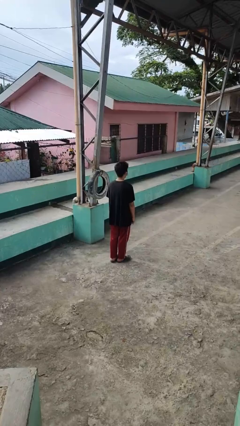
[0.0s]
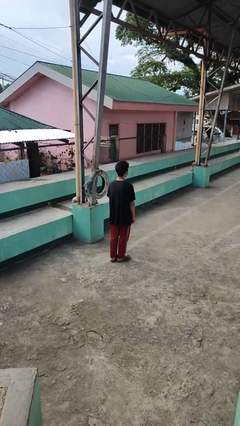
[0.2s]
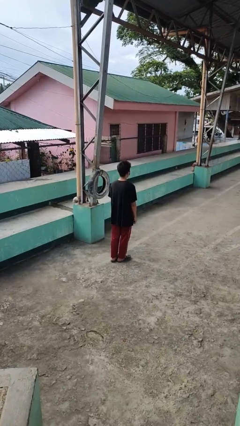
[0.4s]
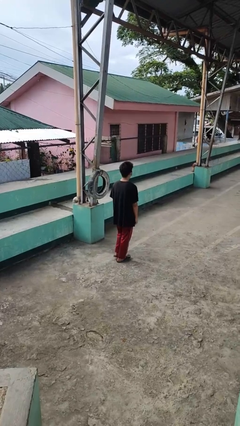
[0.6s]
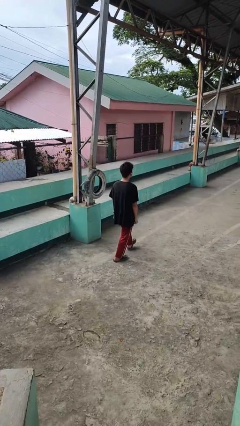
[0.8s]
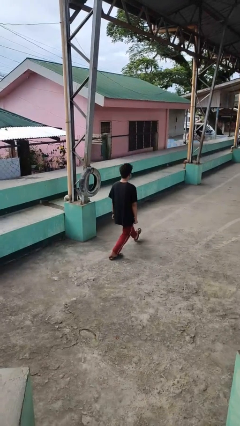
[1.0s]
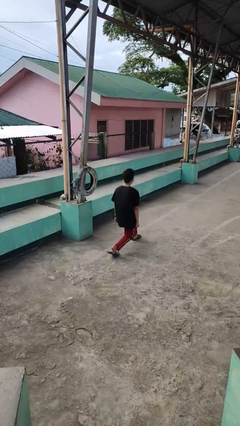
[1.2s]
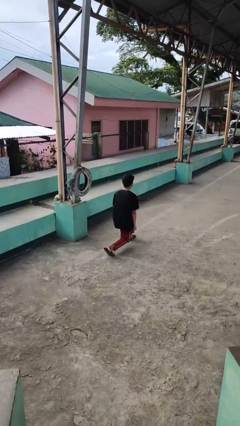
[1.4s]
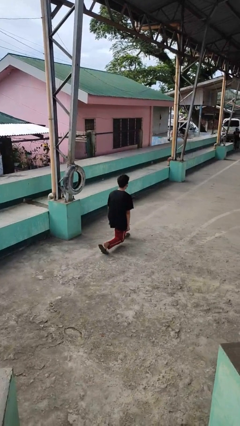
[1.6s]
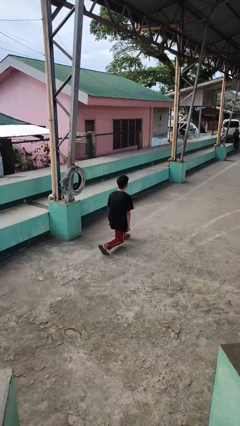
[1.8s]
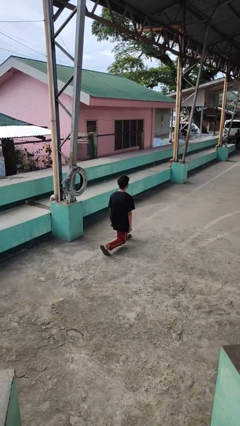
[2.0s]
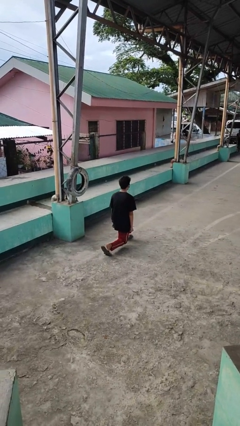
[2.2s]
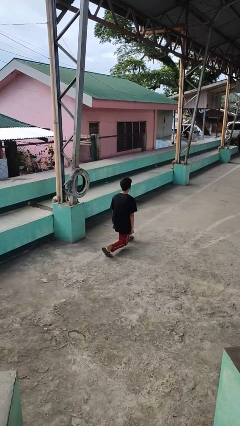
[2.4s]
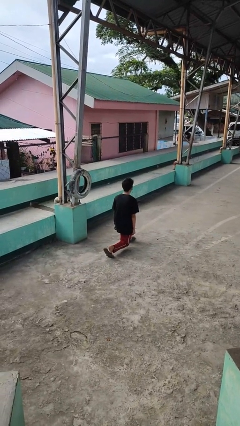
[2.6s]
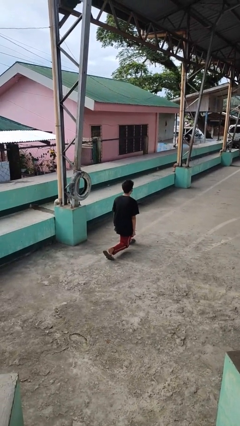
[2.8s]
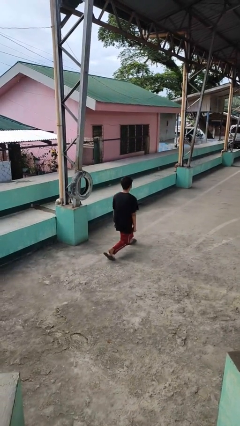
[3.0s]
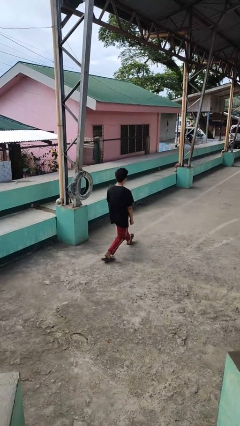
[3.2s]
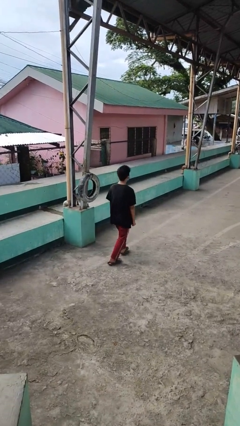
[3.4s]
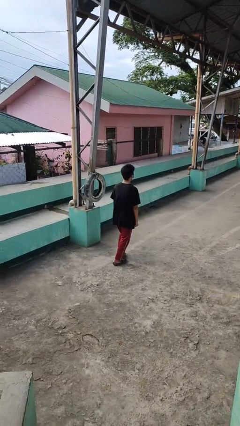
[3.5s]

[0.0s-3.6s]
person exercises with lunges

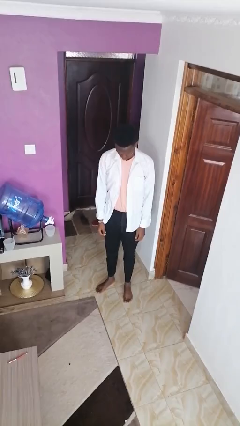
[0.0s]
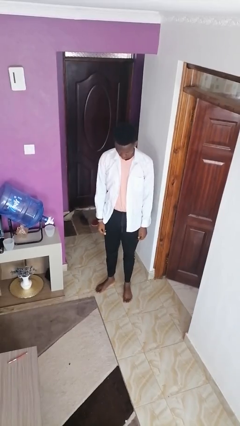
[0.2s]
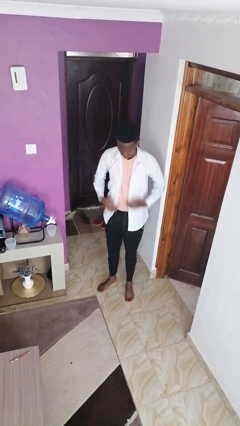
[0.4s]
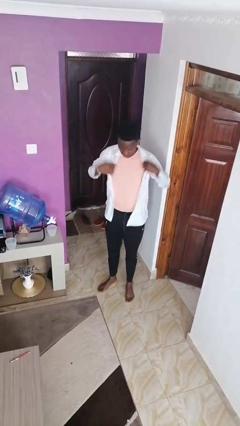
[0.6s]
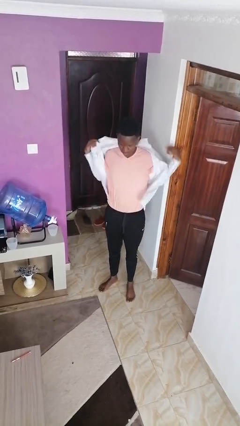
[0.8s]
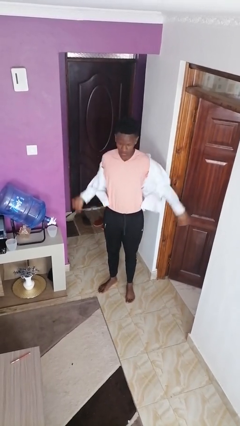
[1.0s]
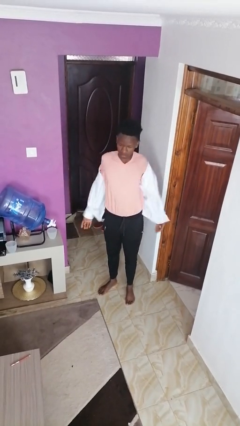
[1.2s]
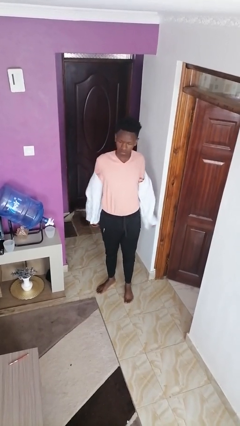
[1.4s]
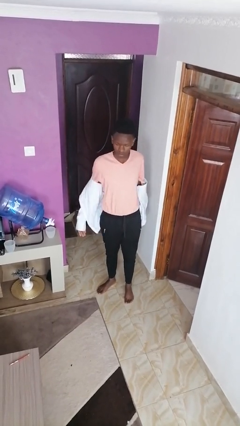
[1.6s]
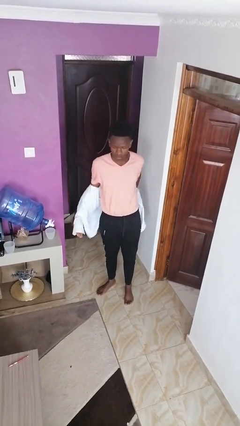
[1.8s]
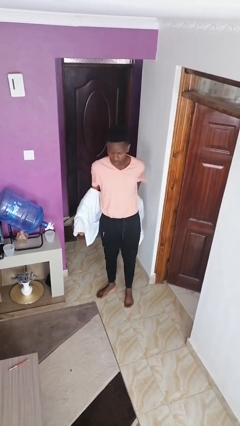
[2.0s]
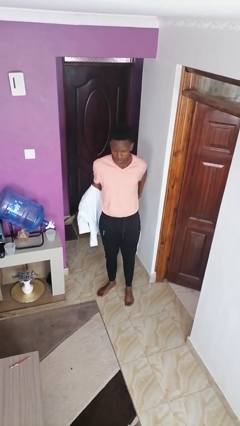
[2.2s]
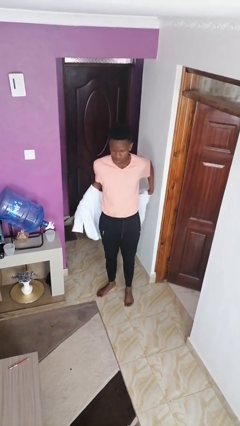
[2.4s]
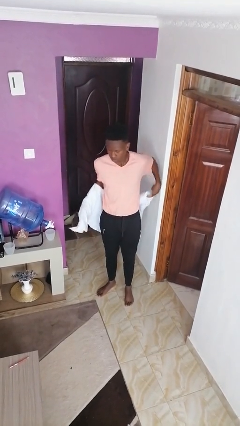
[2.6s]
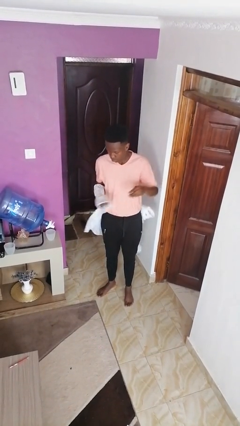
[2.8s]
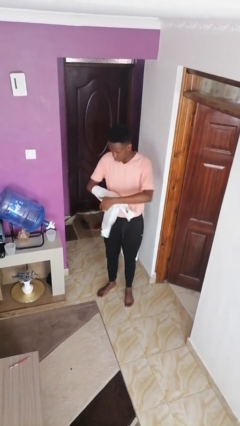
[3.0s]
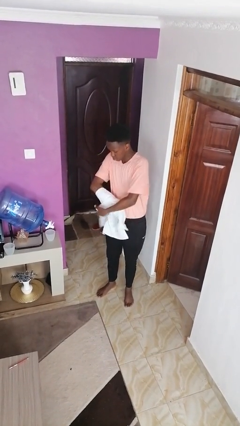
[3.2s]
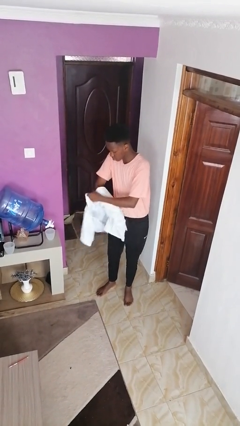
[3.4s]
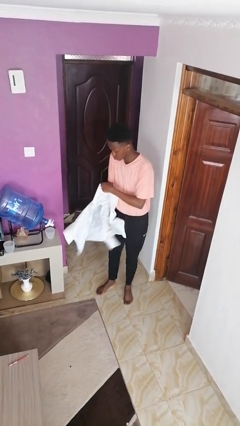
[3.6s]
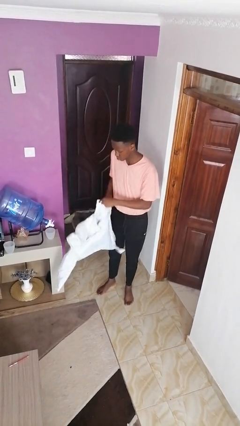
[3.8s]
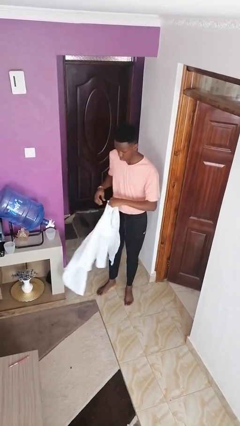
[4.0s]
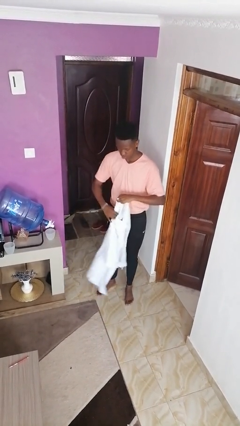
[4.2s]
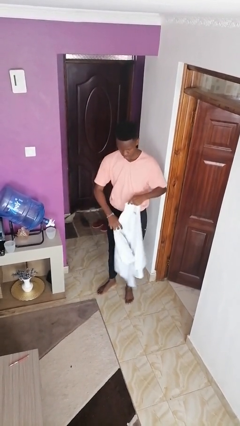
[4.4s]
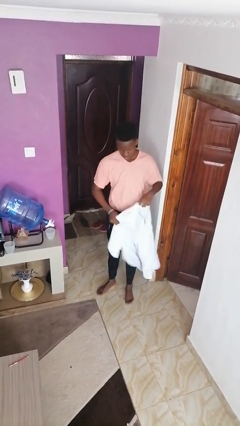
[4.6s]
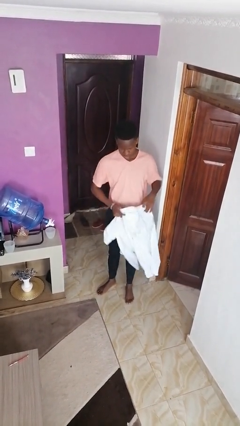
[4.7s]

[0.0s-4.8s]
person takes off shirt

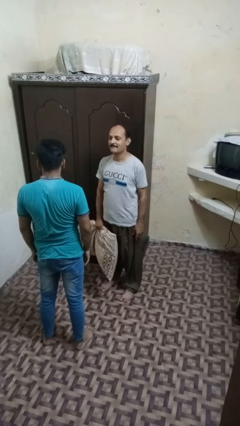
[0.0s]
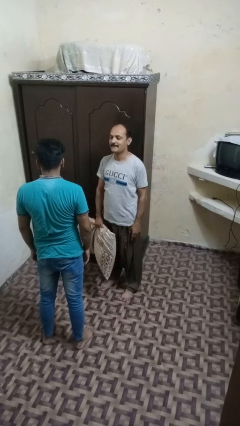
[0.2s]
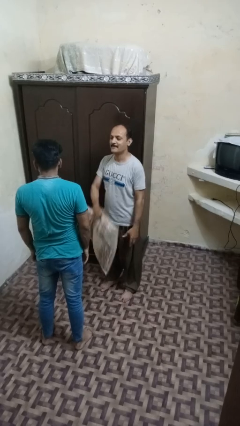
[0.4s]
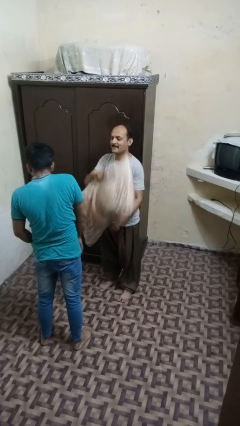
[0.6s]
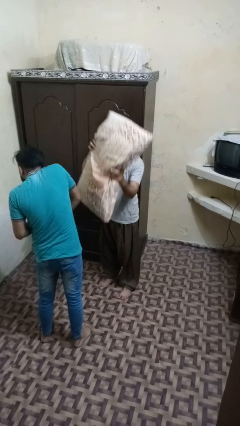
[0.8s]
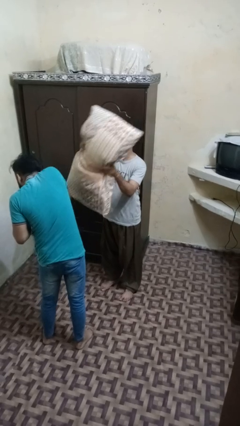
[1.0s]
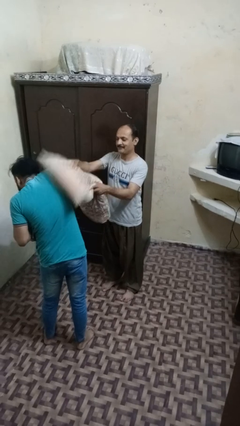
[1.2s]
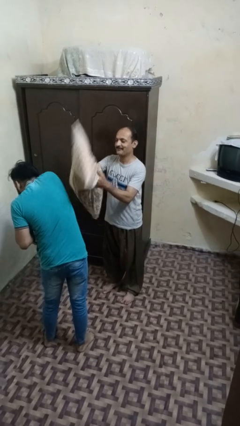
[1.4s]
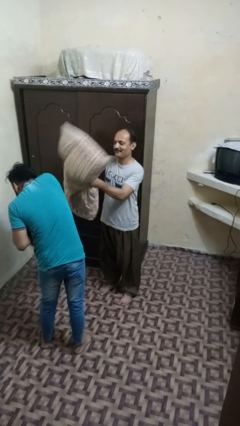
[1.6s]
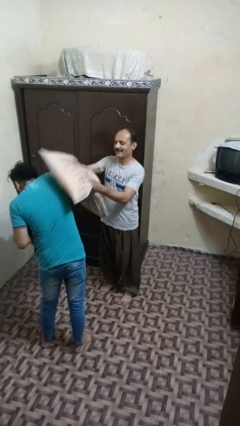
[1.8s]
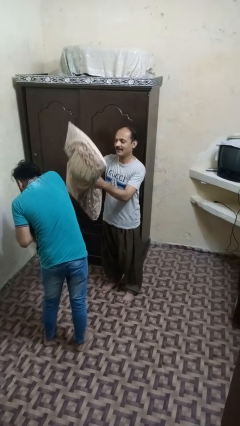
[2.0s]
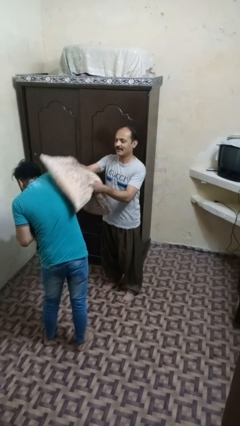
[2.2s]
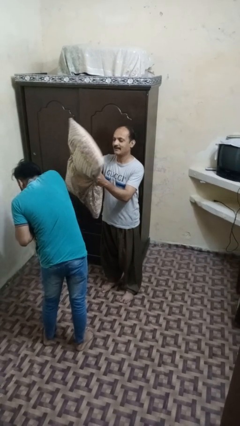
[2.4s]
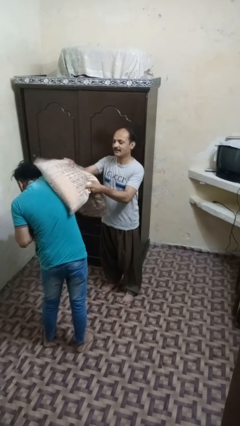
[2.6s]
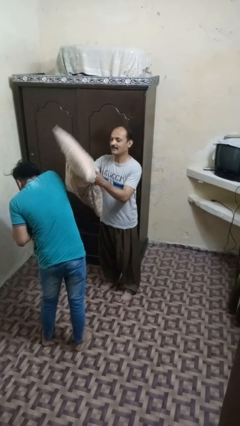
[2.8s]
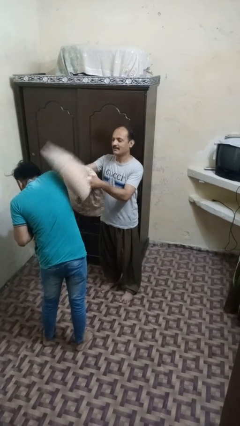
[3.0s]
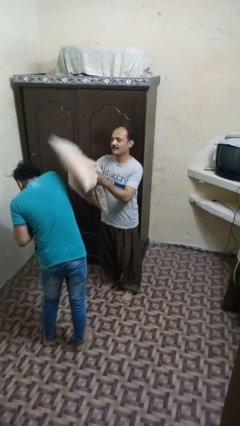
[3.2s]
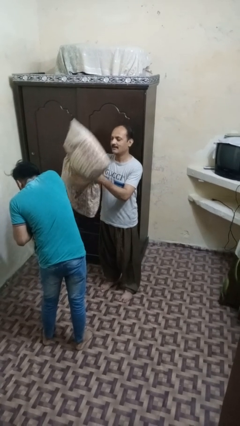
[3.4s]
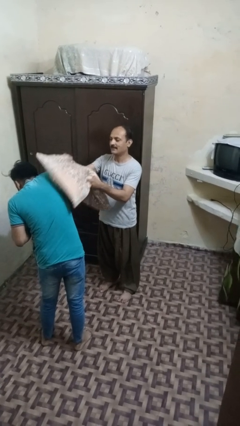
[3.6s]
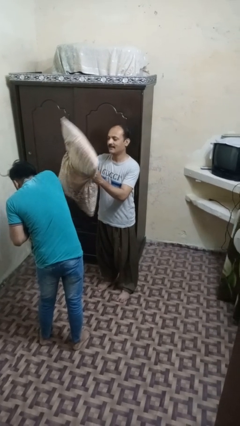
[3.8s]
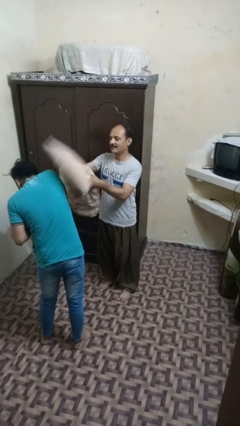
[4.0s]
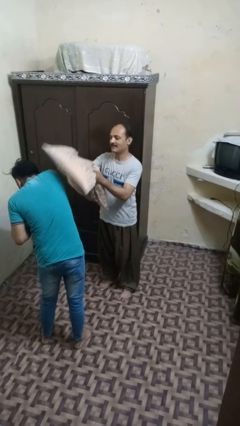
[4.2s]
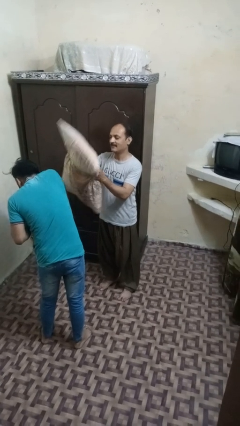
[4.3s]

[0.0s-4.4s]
person hits person with pillow

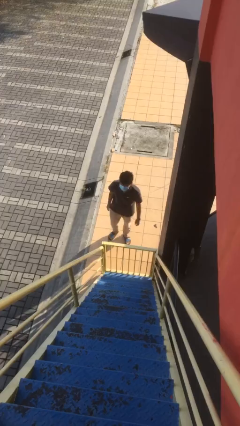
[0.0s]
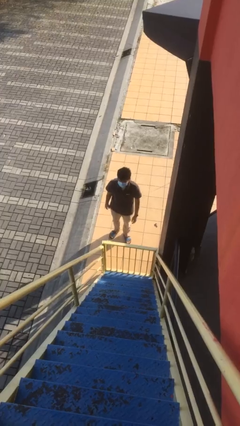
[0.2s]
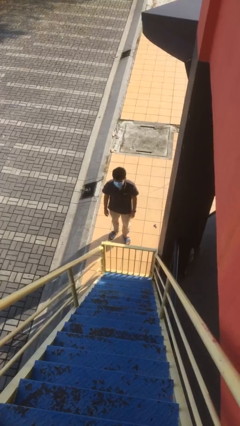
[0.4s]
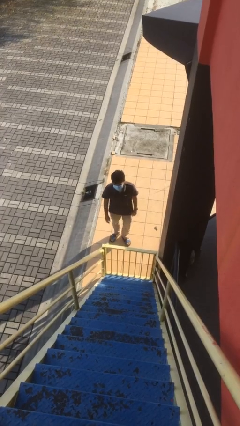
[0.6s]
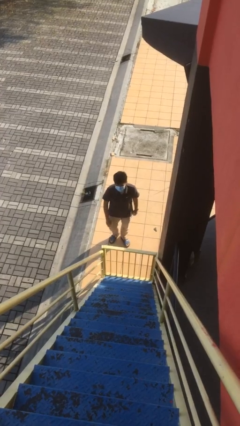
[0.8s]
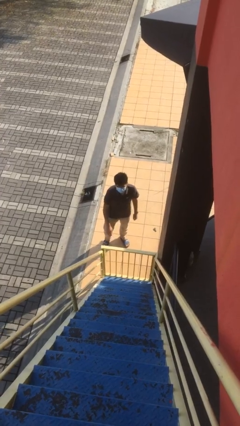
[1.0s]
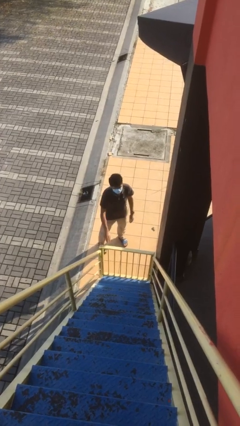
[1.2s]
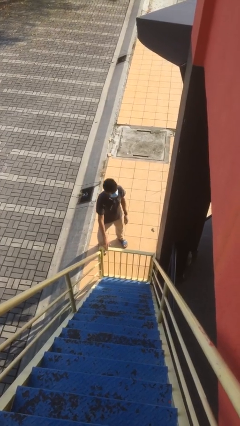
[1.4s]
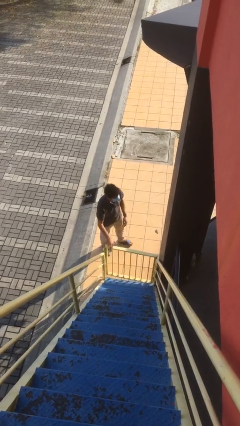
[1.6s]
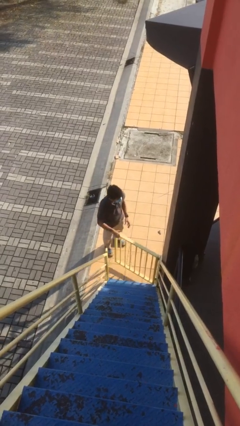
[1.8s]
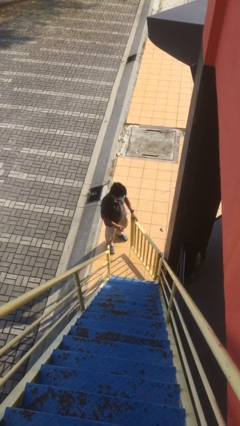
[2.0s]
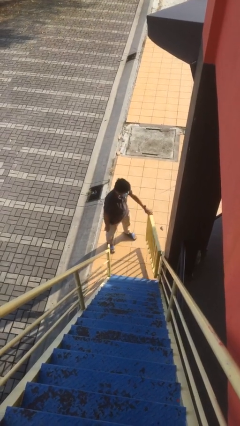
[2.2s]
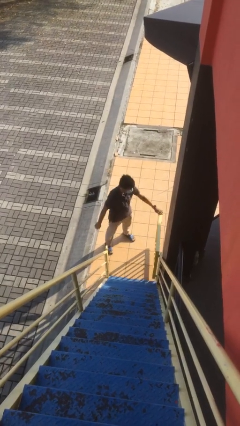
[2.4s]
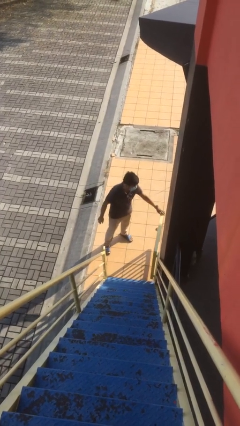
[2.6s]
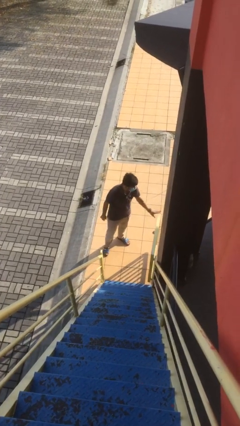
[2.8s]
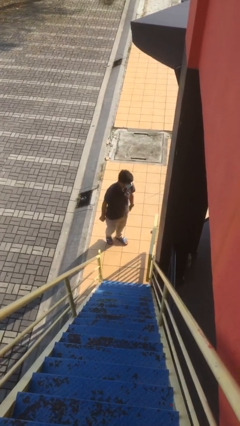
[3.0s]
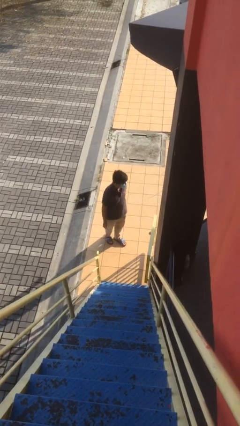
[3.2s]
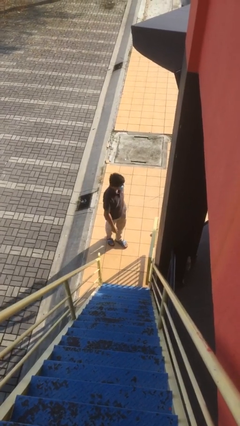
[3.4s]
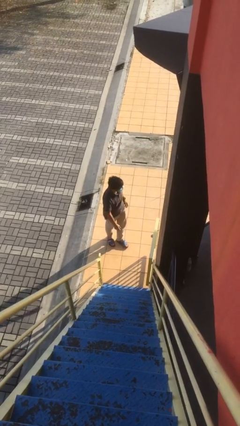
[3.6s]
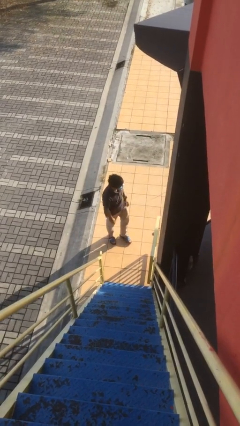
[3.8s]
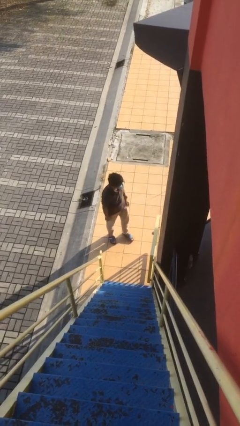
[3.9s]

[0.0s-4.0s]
person opens facility door

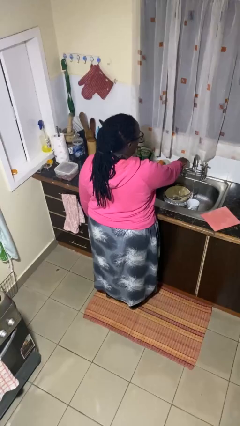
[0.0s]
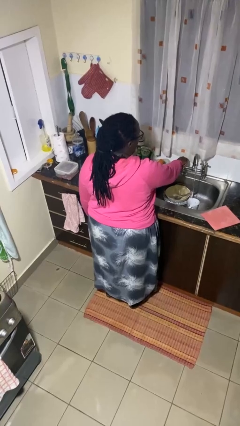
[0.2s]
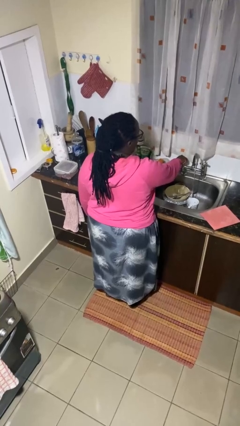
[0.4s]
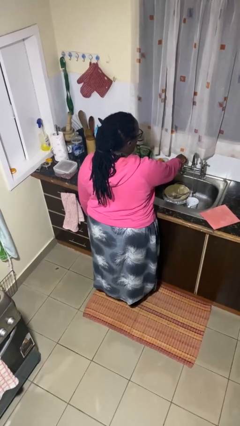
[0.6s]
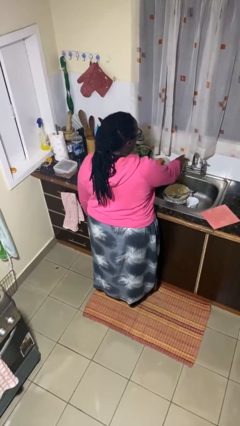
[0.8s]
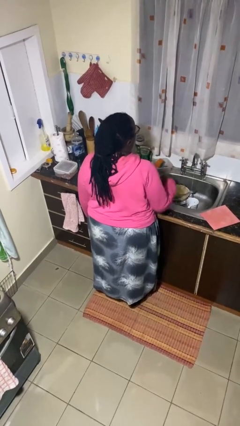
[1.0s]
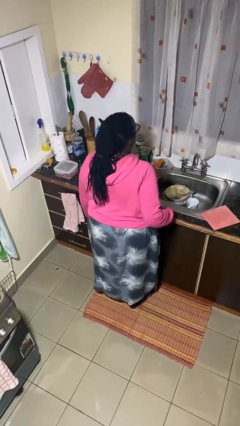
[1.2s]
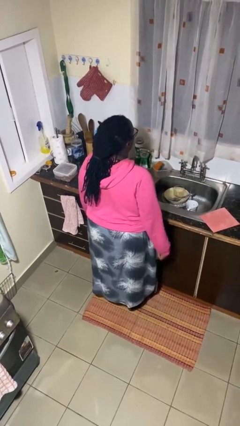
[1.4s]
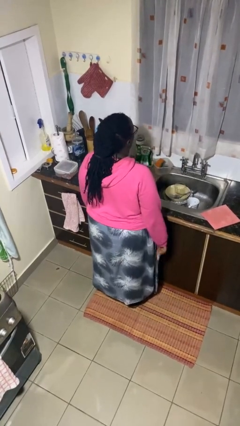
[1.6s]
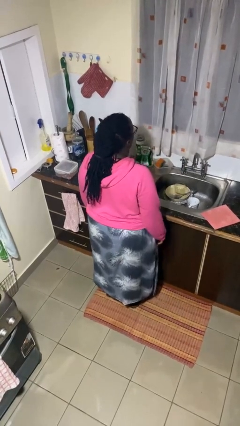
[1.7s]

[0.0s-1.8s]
person turns off faucet
